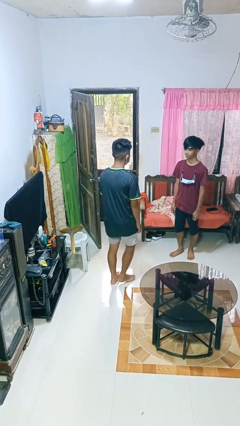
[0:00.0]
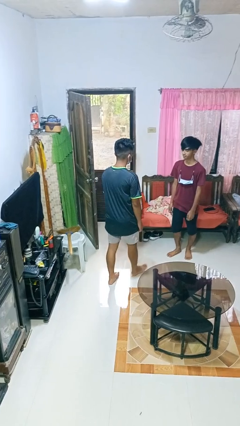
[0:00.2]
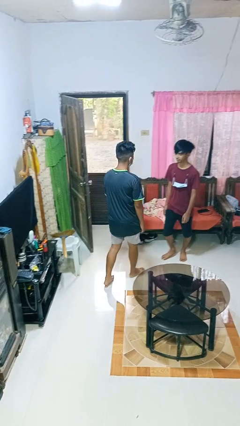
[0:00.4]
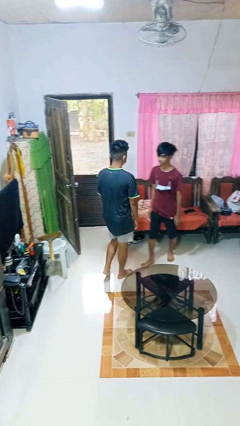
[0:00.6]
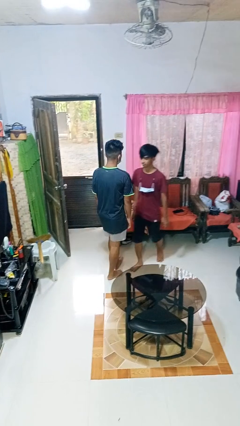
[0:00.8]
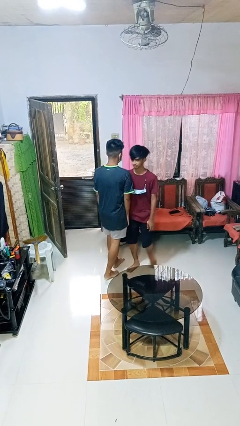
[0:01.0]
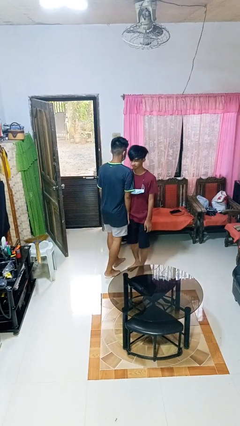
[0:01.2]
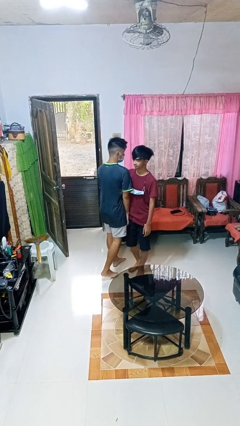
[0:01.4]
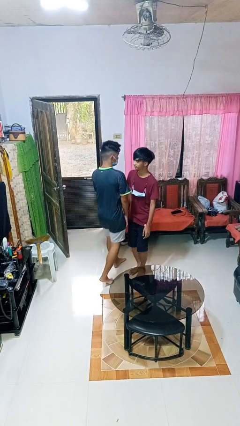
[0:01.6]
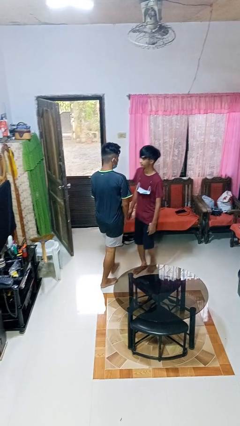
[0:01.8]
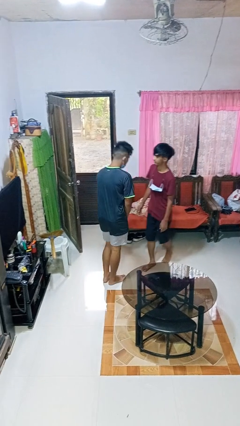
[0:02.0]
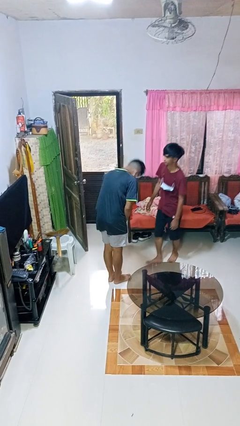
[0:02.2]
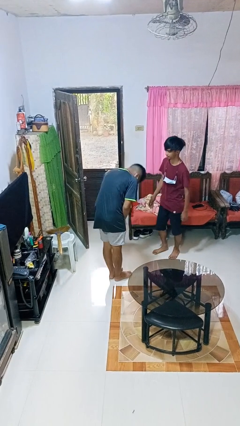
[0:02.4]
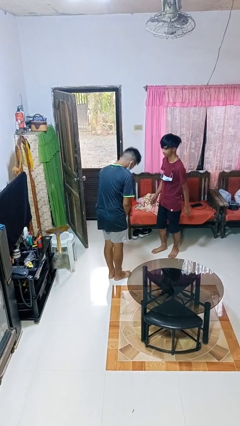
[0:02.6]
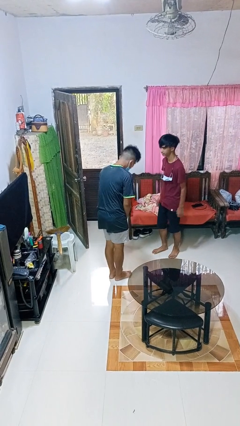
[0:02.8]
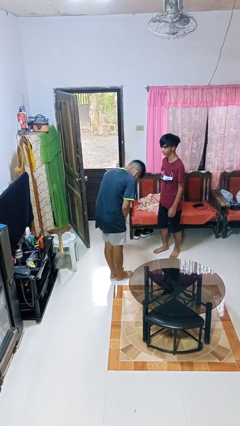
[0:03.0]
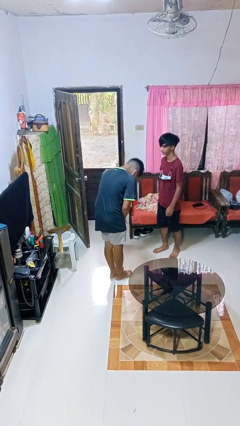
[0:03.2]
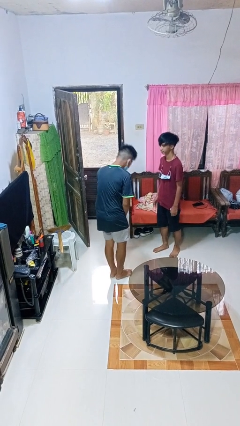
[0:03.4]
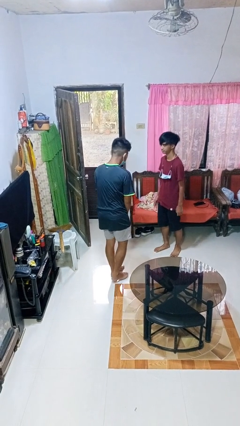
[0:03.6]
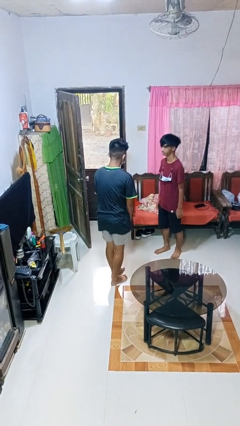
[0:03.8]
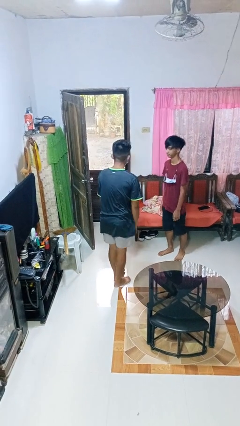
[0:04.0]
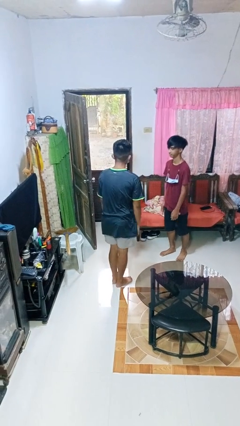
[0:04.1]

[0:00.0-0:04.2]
person bumps into person

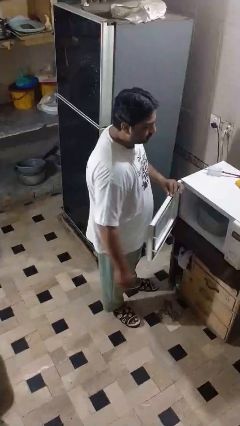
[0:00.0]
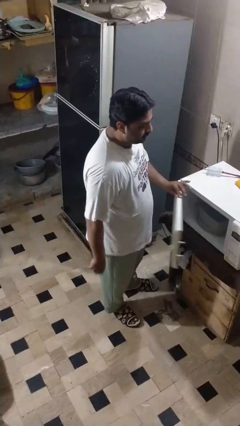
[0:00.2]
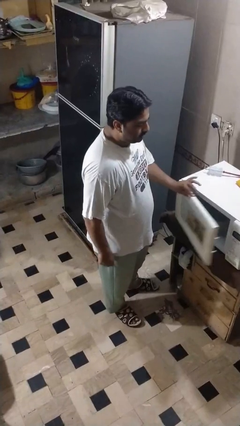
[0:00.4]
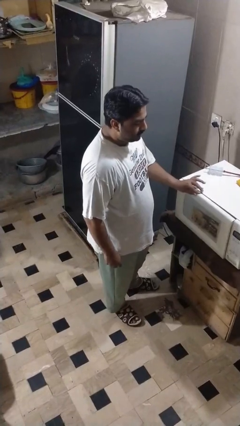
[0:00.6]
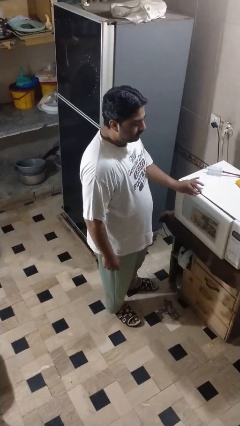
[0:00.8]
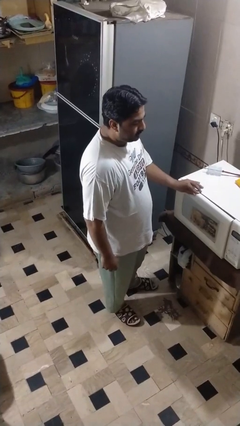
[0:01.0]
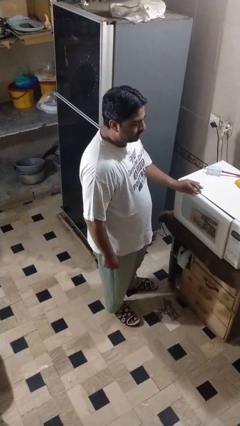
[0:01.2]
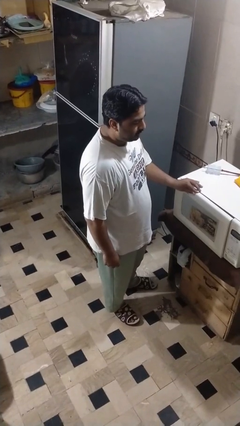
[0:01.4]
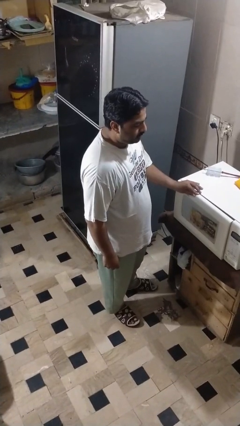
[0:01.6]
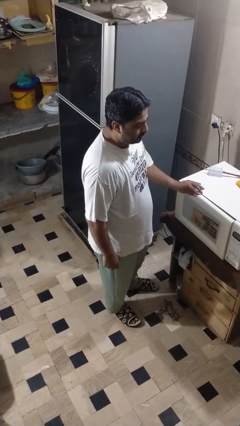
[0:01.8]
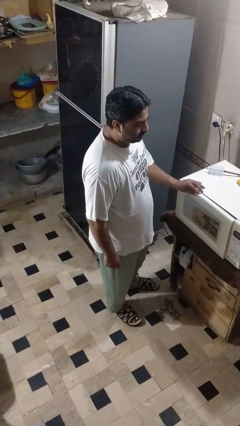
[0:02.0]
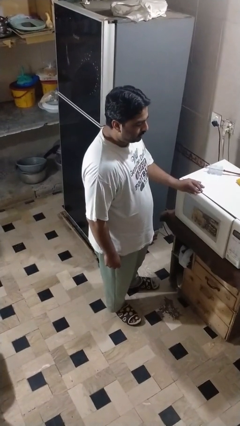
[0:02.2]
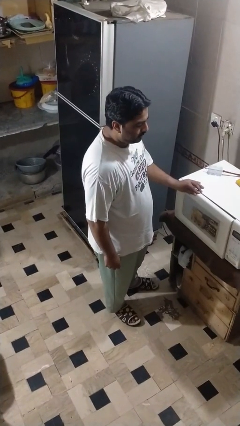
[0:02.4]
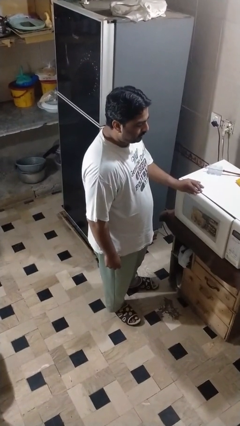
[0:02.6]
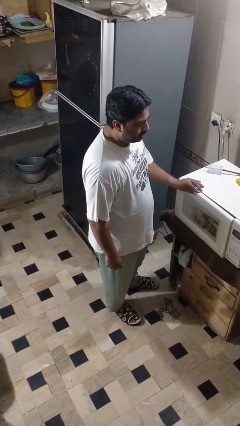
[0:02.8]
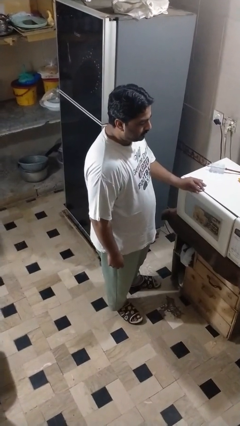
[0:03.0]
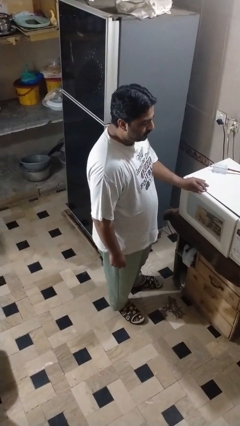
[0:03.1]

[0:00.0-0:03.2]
person closes microwave

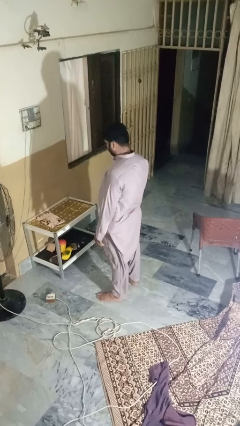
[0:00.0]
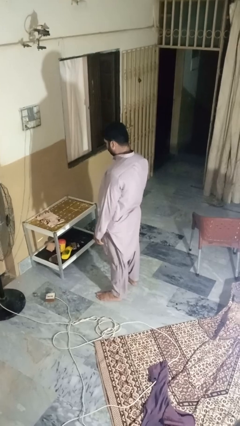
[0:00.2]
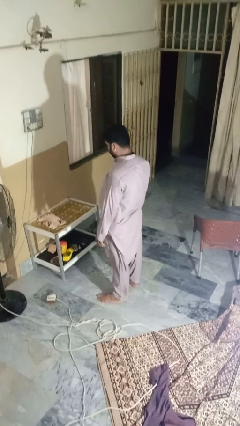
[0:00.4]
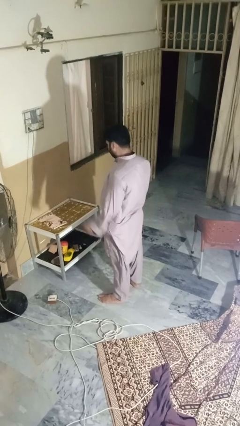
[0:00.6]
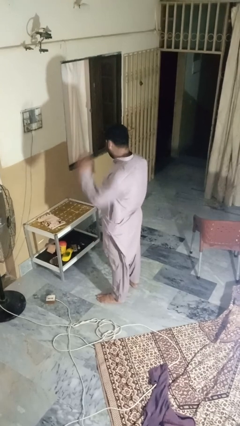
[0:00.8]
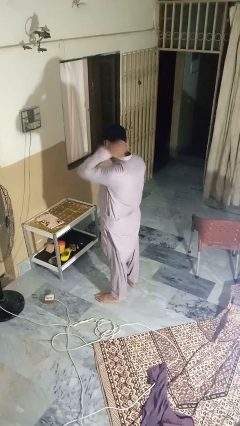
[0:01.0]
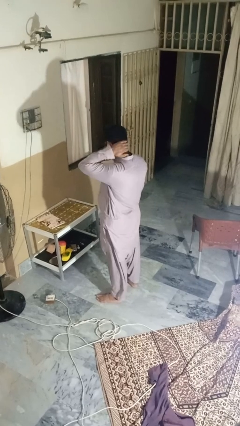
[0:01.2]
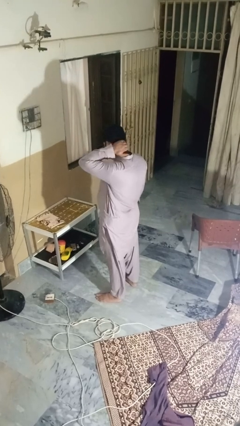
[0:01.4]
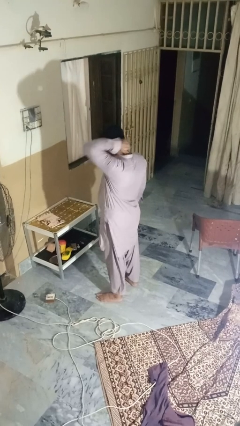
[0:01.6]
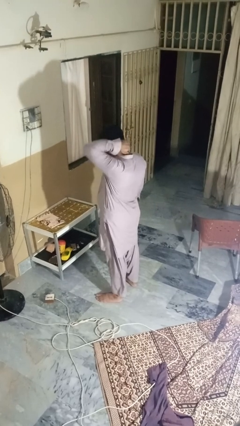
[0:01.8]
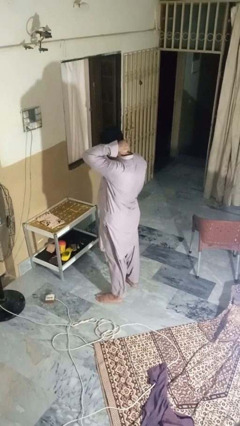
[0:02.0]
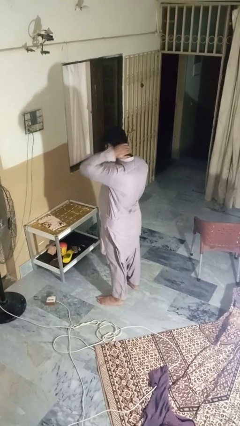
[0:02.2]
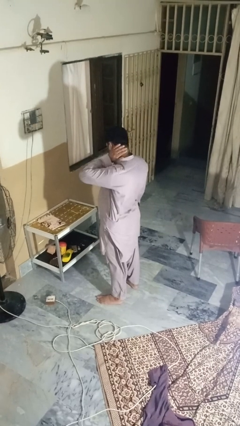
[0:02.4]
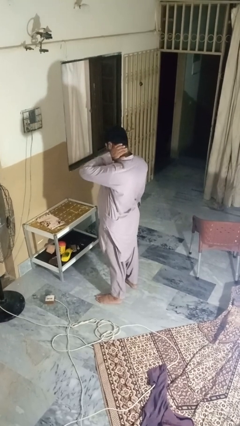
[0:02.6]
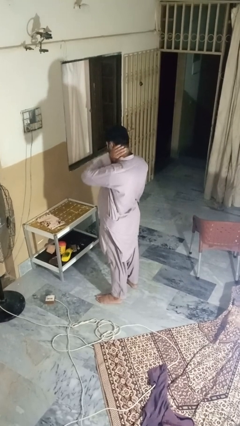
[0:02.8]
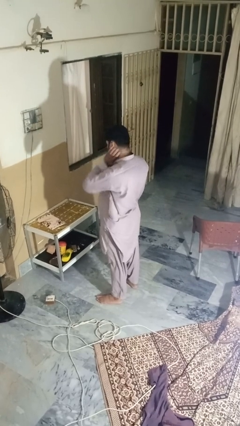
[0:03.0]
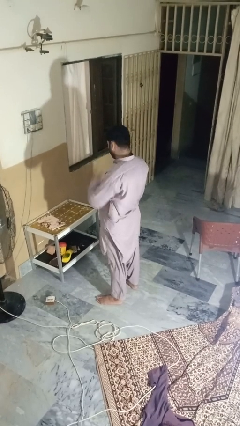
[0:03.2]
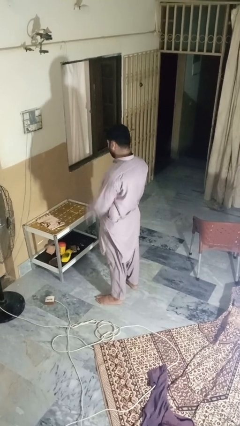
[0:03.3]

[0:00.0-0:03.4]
person rubs neck

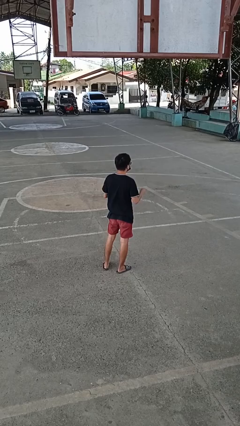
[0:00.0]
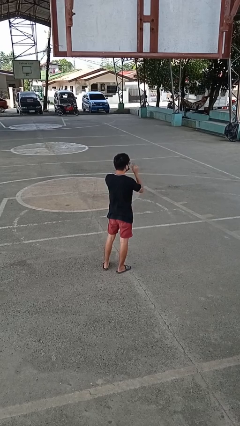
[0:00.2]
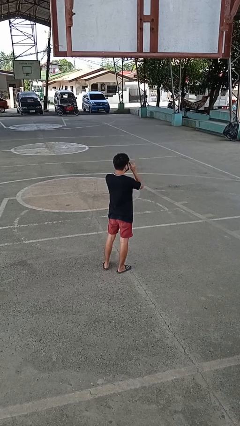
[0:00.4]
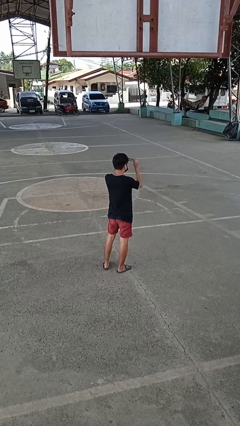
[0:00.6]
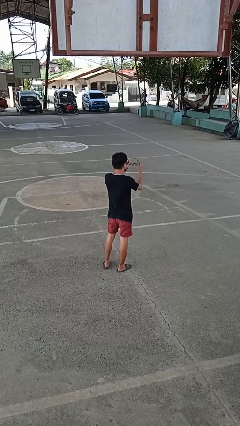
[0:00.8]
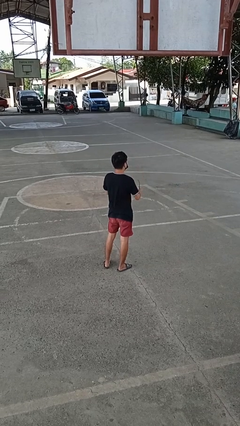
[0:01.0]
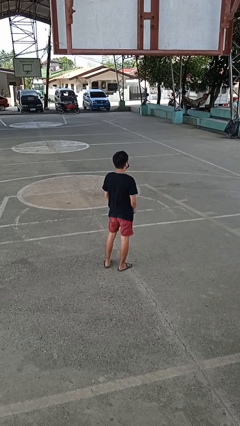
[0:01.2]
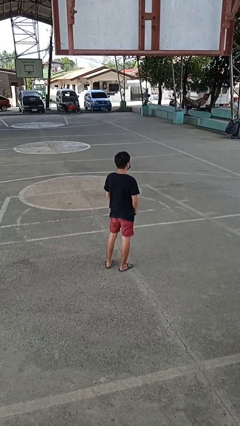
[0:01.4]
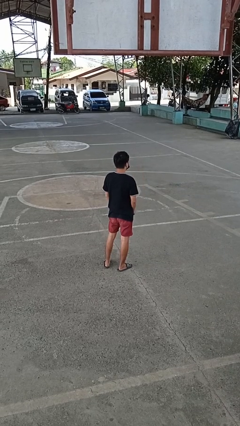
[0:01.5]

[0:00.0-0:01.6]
person takes off glasses

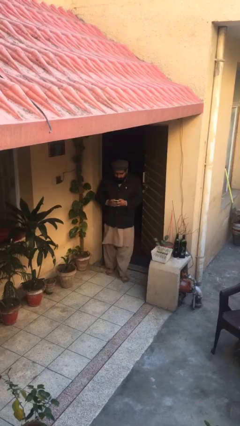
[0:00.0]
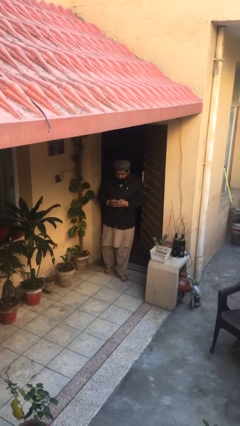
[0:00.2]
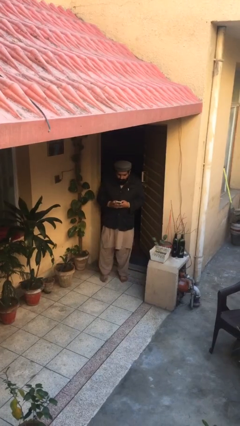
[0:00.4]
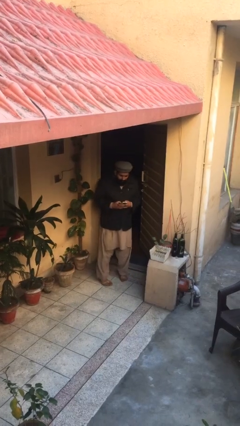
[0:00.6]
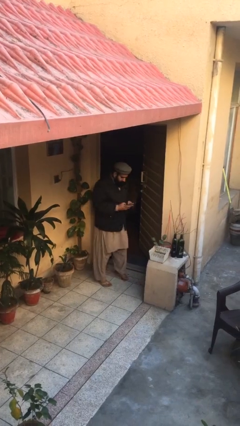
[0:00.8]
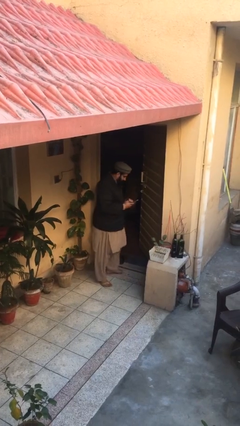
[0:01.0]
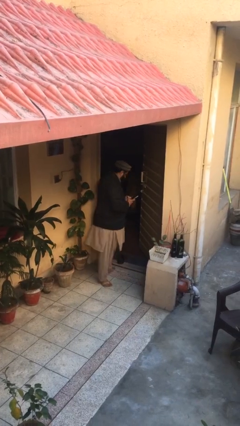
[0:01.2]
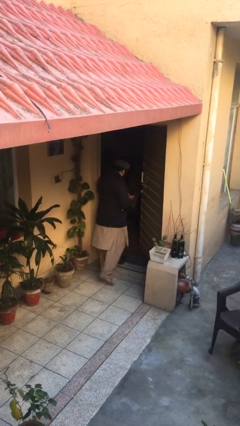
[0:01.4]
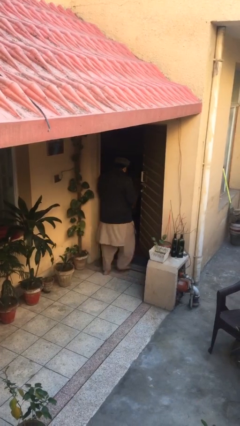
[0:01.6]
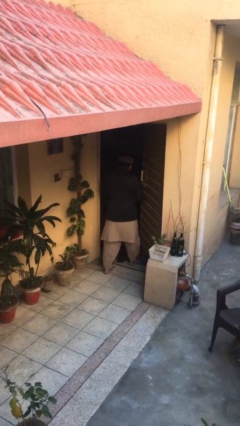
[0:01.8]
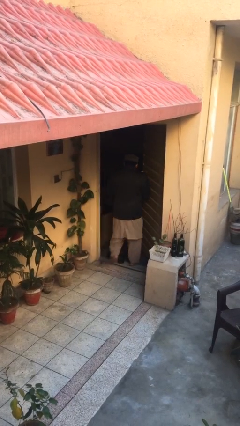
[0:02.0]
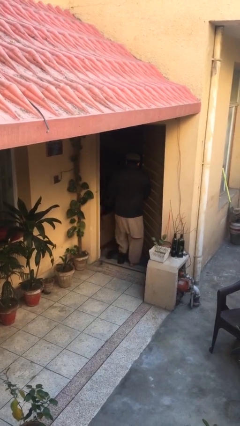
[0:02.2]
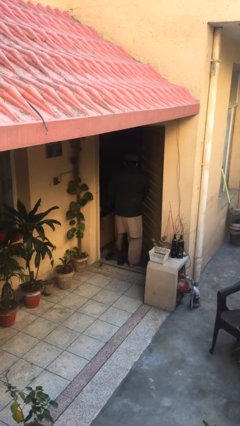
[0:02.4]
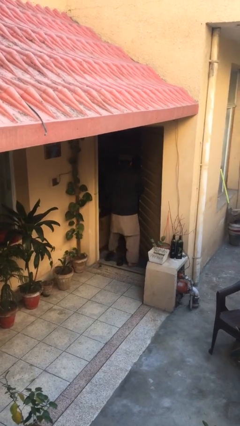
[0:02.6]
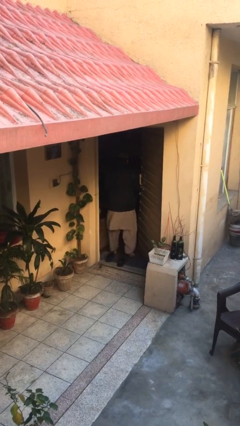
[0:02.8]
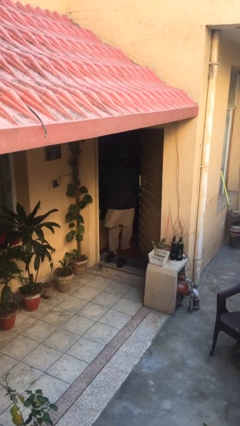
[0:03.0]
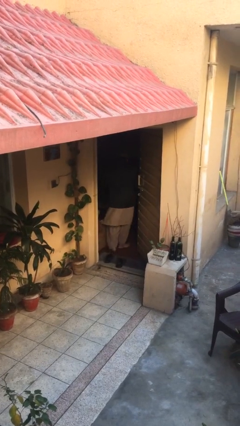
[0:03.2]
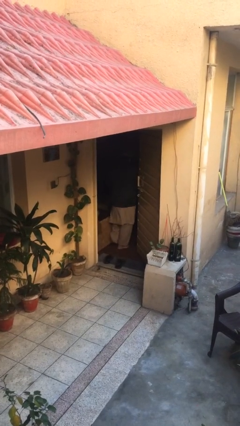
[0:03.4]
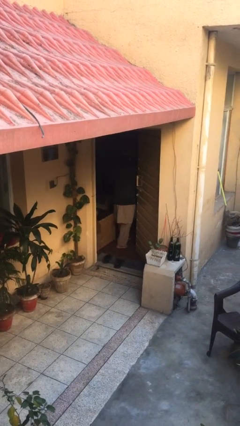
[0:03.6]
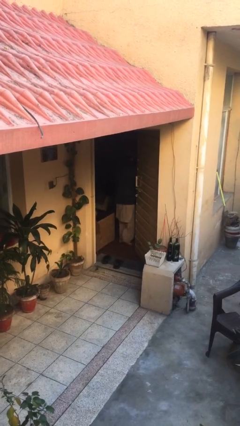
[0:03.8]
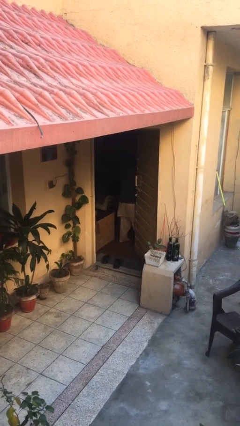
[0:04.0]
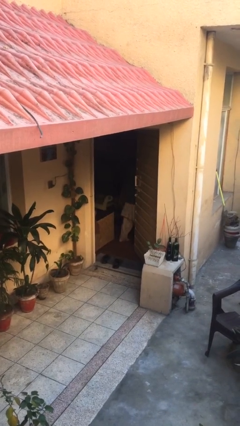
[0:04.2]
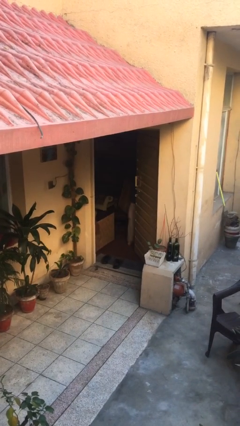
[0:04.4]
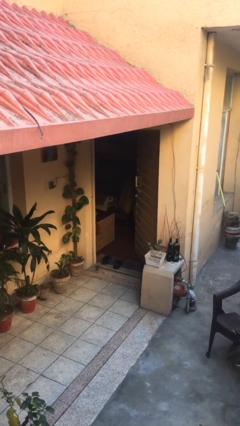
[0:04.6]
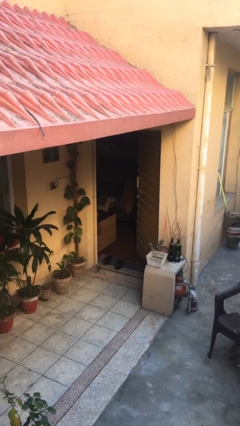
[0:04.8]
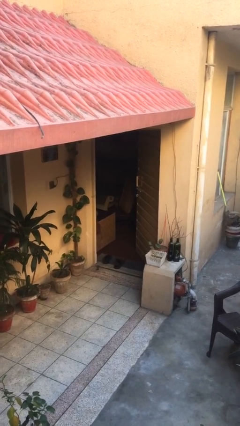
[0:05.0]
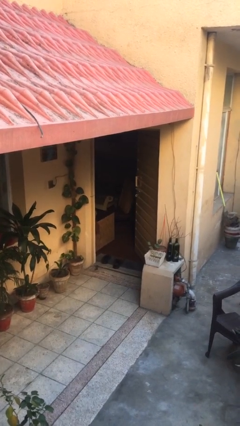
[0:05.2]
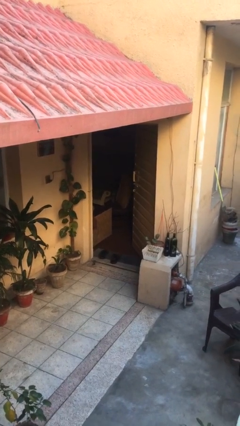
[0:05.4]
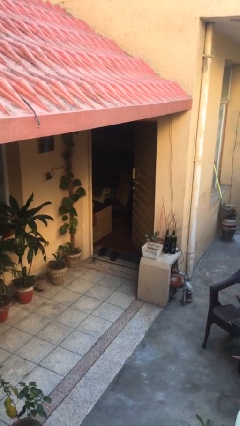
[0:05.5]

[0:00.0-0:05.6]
person exits scene through structure
